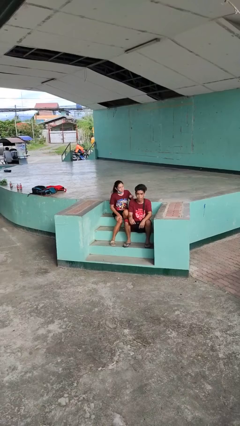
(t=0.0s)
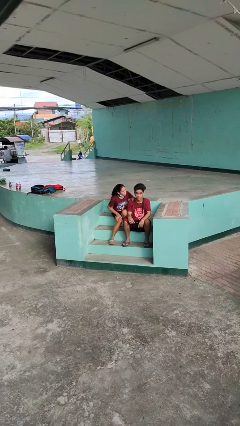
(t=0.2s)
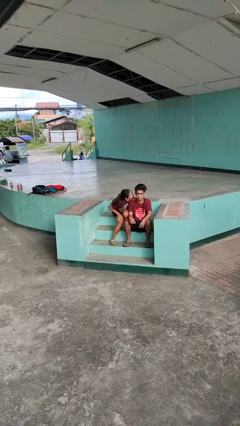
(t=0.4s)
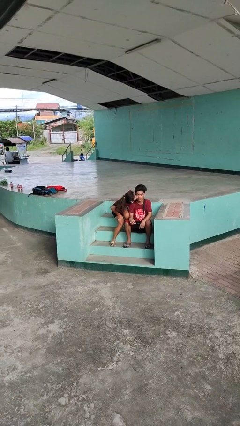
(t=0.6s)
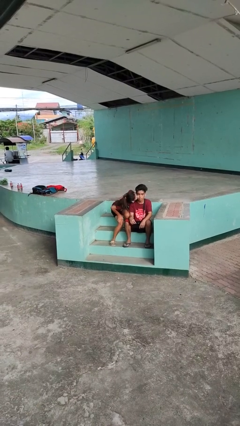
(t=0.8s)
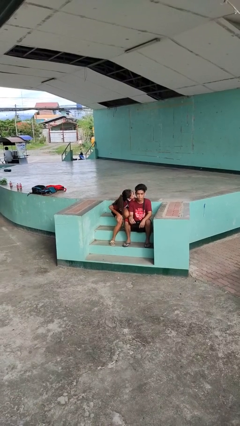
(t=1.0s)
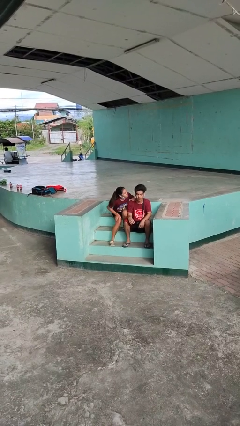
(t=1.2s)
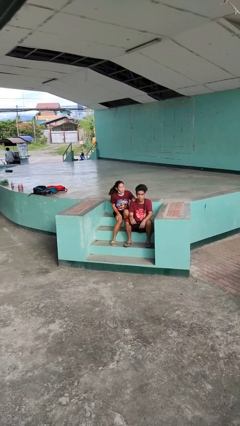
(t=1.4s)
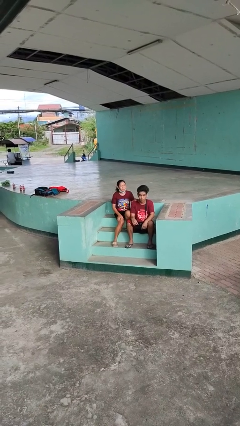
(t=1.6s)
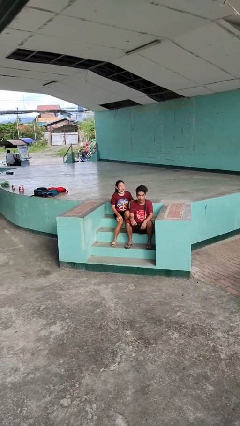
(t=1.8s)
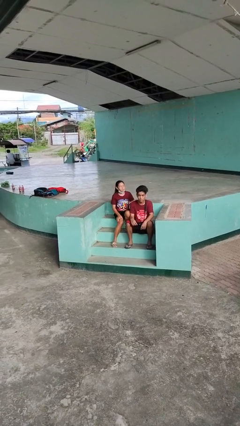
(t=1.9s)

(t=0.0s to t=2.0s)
person kisses cheek of person

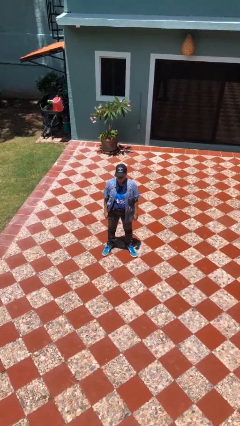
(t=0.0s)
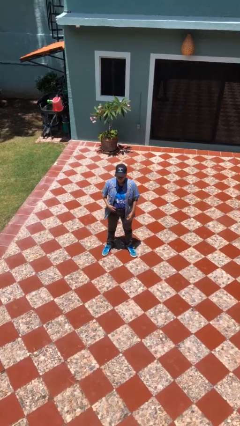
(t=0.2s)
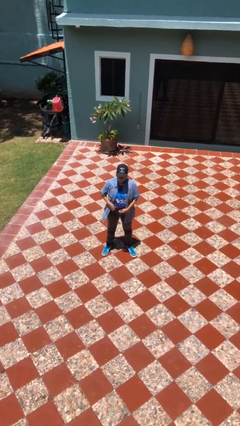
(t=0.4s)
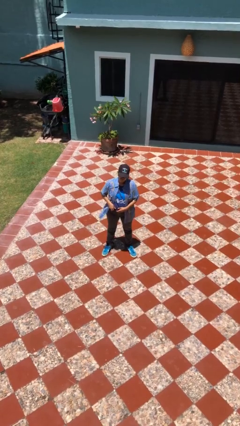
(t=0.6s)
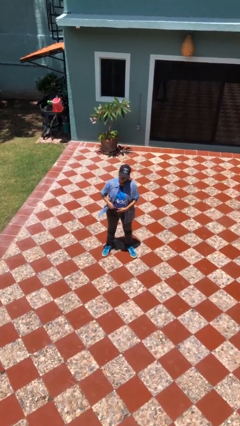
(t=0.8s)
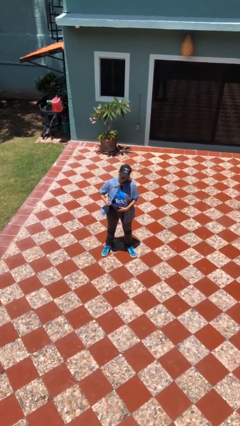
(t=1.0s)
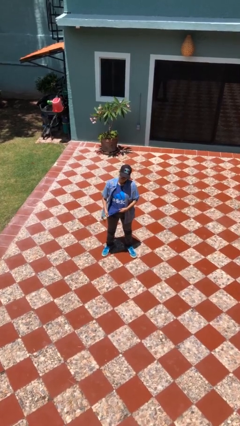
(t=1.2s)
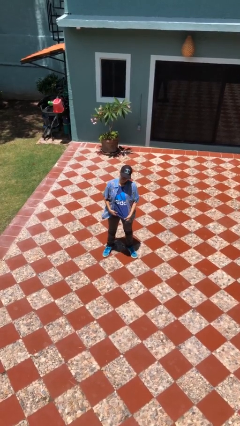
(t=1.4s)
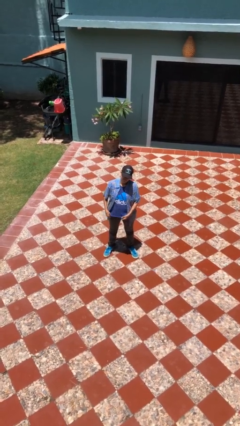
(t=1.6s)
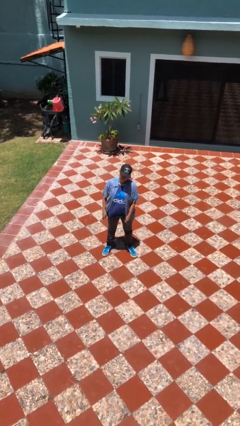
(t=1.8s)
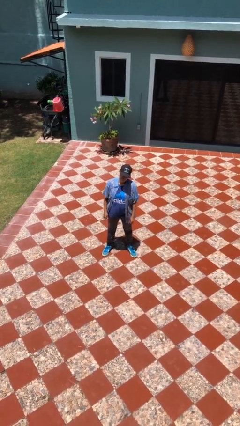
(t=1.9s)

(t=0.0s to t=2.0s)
person untucks shirt

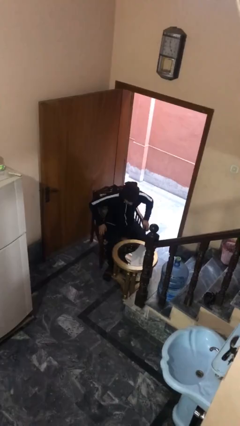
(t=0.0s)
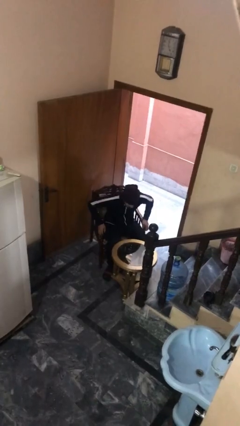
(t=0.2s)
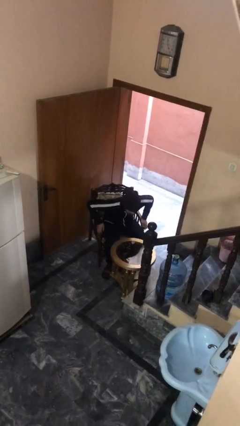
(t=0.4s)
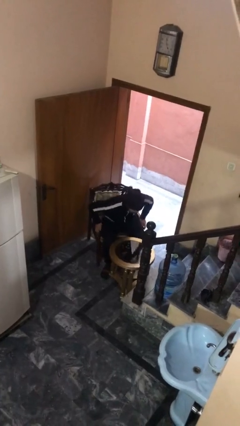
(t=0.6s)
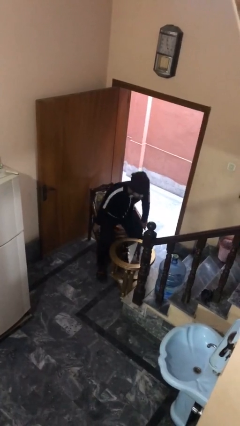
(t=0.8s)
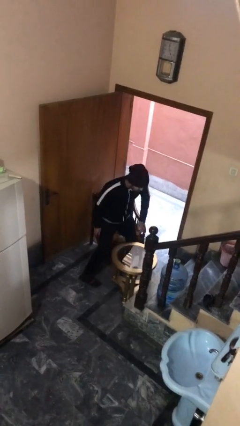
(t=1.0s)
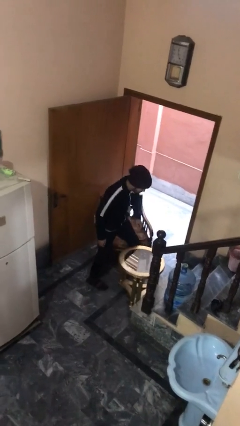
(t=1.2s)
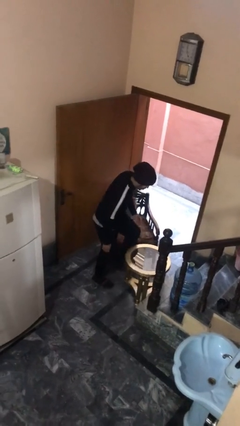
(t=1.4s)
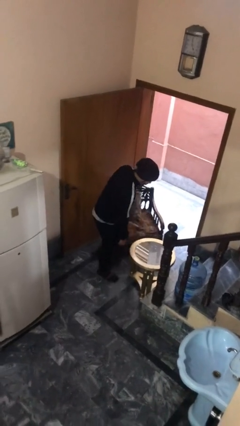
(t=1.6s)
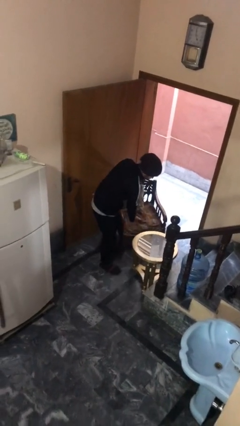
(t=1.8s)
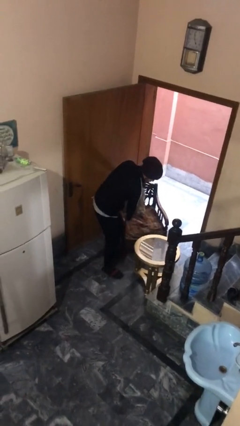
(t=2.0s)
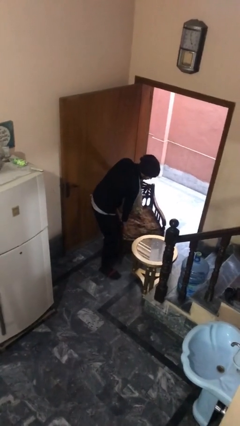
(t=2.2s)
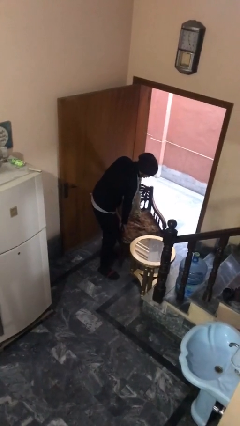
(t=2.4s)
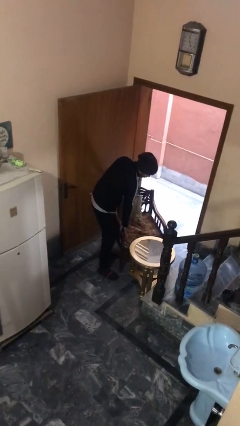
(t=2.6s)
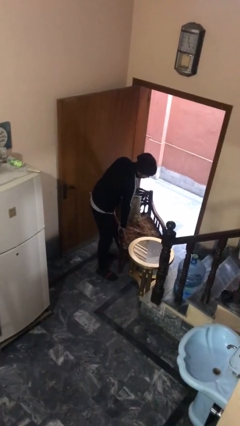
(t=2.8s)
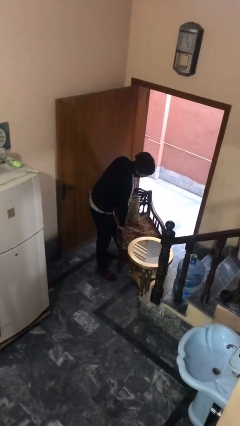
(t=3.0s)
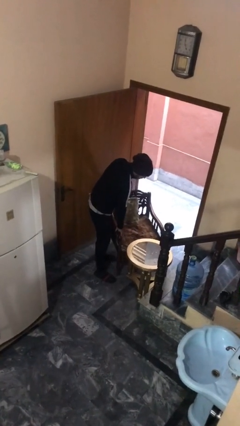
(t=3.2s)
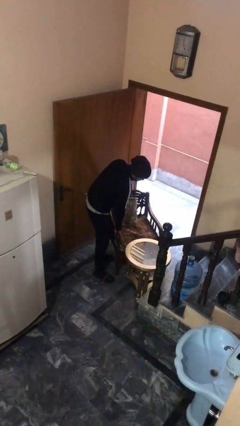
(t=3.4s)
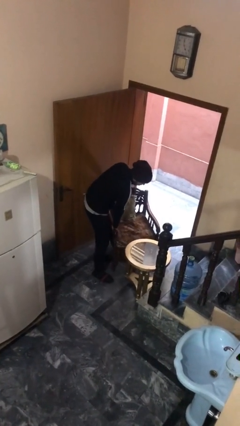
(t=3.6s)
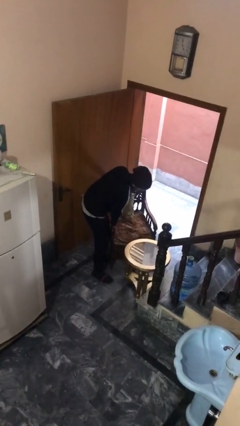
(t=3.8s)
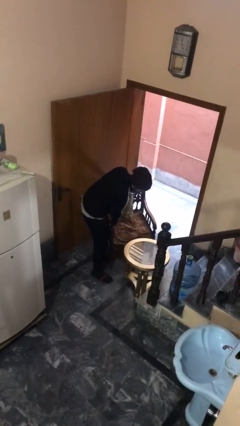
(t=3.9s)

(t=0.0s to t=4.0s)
person stands up

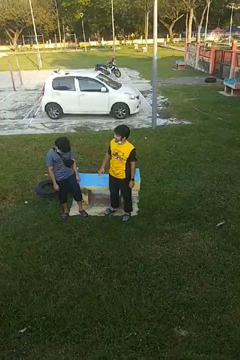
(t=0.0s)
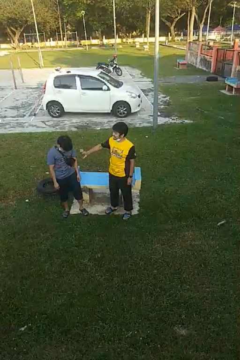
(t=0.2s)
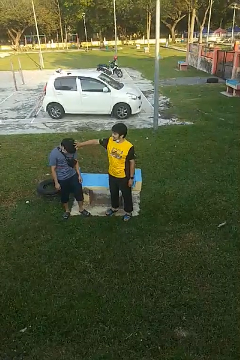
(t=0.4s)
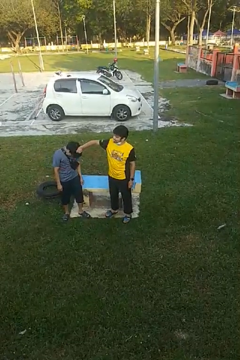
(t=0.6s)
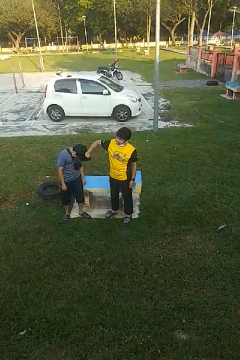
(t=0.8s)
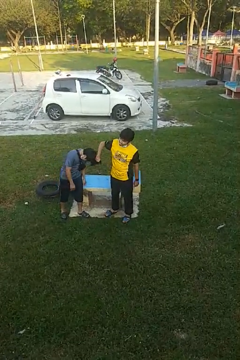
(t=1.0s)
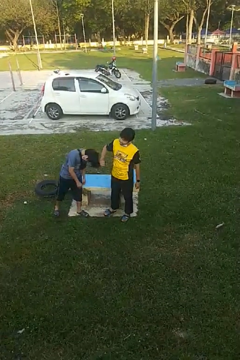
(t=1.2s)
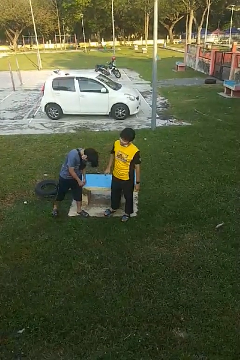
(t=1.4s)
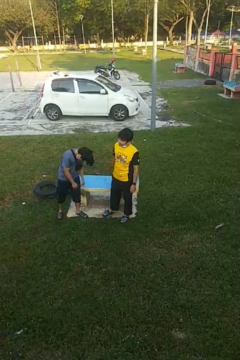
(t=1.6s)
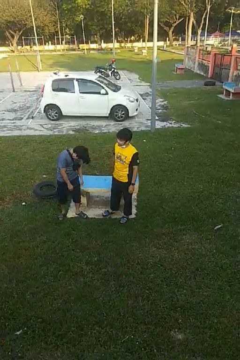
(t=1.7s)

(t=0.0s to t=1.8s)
person grabs person by hair

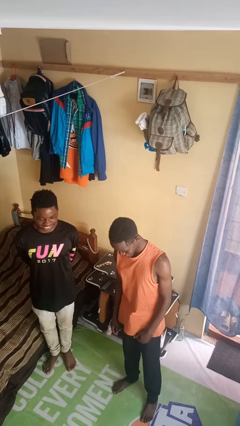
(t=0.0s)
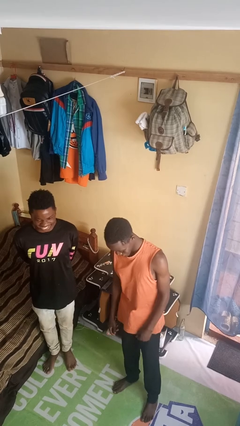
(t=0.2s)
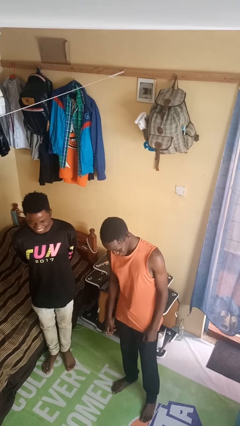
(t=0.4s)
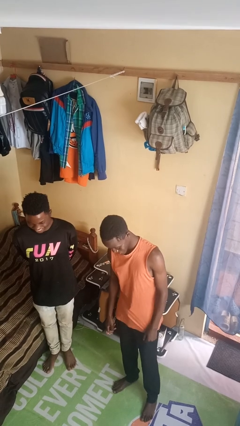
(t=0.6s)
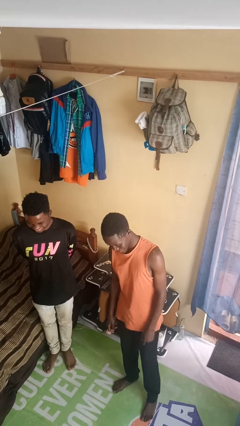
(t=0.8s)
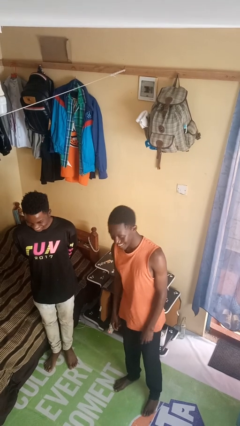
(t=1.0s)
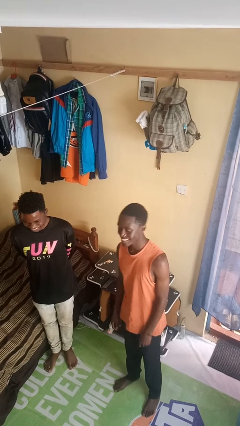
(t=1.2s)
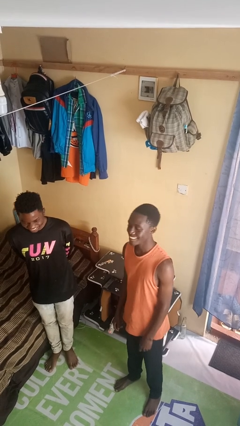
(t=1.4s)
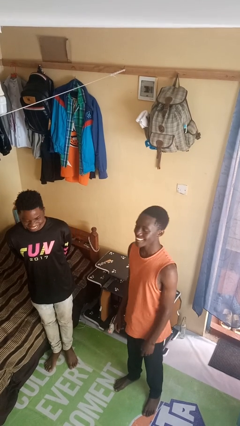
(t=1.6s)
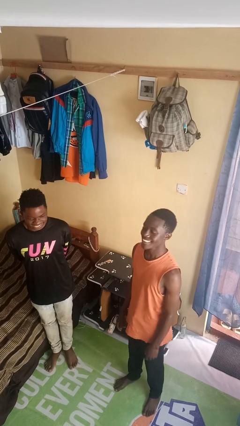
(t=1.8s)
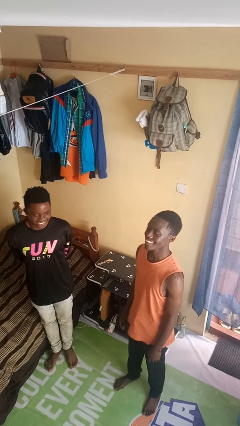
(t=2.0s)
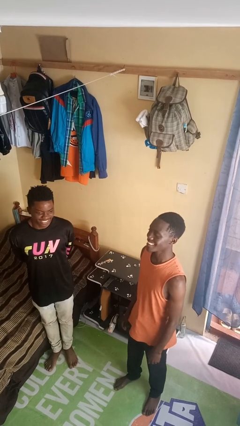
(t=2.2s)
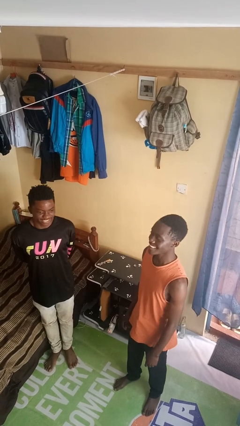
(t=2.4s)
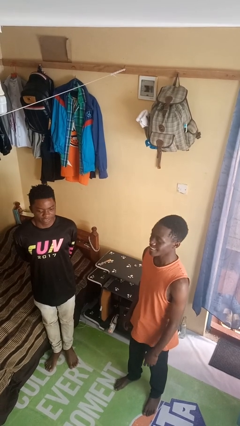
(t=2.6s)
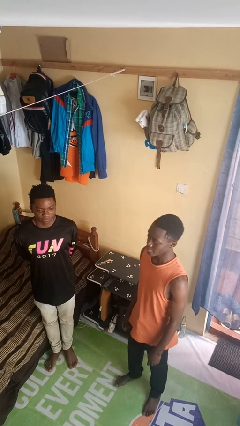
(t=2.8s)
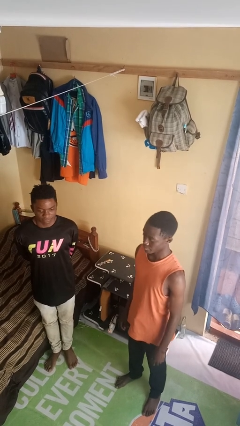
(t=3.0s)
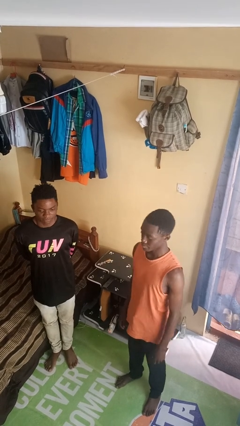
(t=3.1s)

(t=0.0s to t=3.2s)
person laughs with person

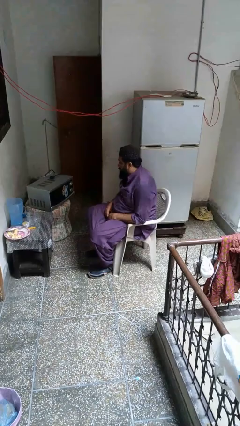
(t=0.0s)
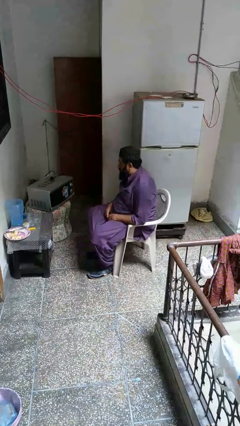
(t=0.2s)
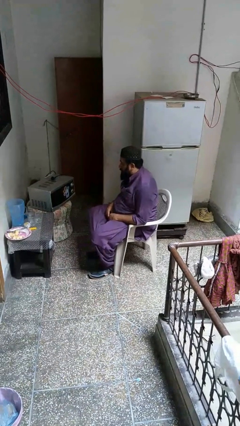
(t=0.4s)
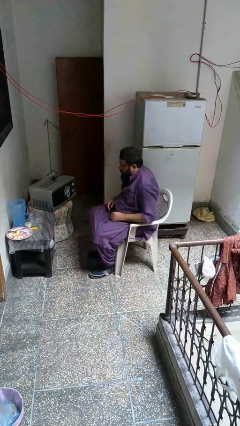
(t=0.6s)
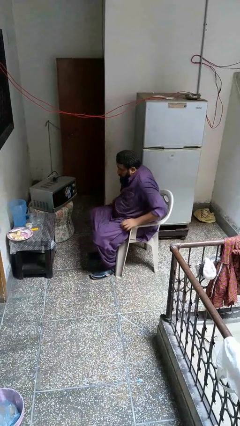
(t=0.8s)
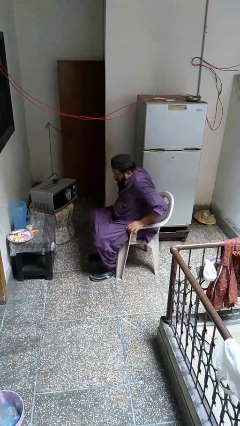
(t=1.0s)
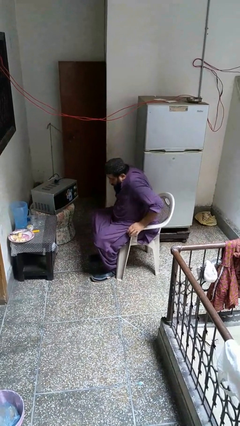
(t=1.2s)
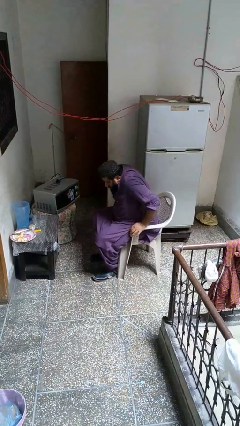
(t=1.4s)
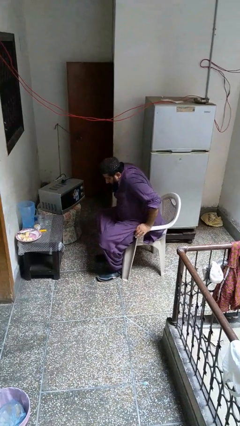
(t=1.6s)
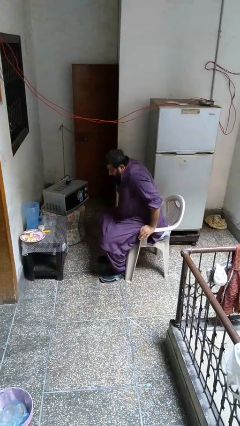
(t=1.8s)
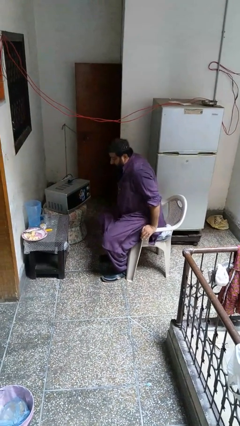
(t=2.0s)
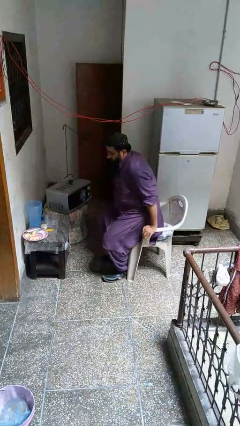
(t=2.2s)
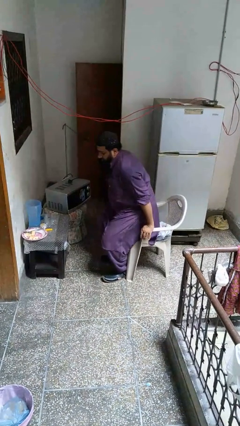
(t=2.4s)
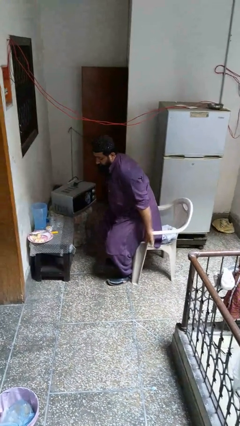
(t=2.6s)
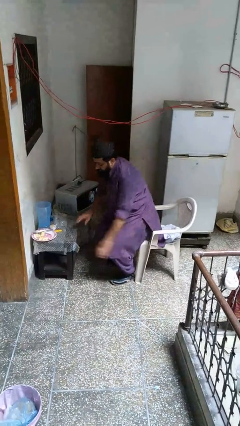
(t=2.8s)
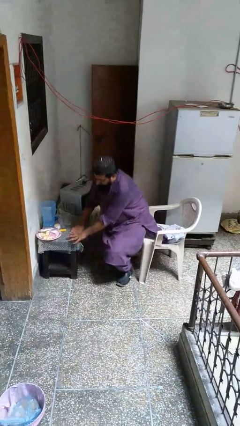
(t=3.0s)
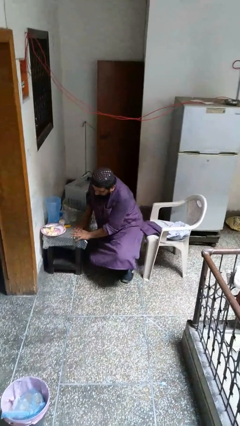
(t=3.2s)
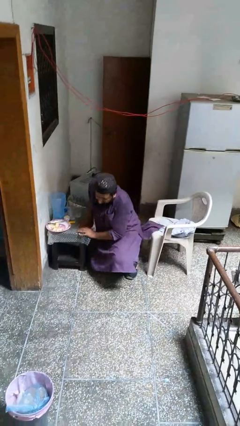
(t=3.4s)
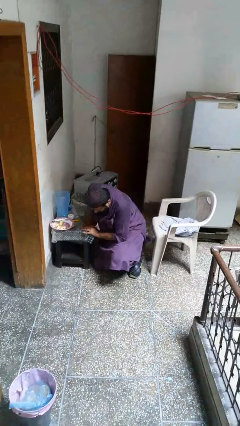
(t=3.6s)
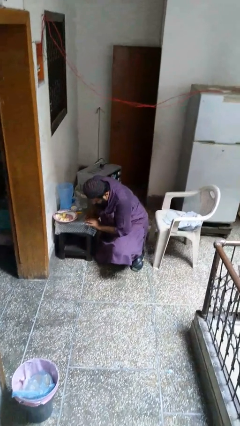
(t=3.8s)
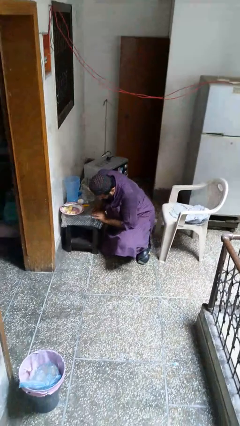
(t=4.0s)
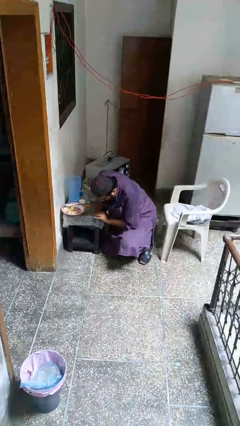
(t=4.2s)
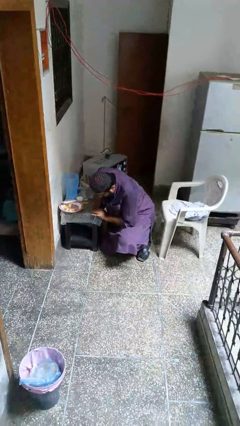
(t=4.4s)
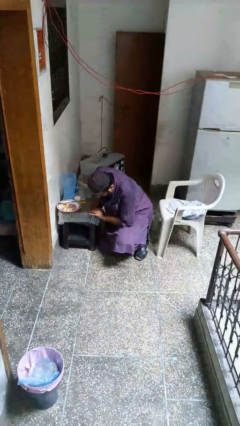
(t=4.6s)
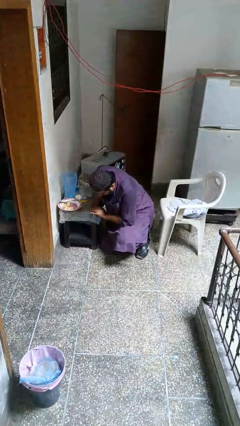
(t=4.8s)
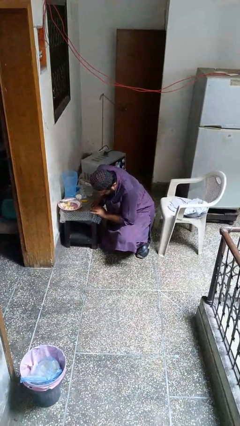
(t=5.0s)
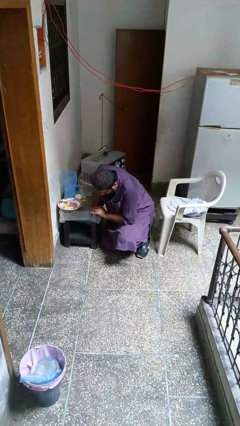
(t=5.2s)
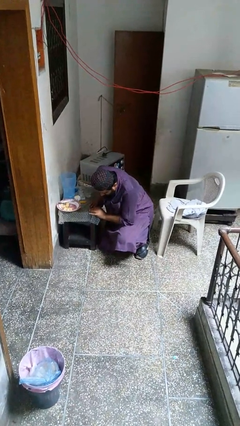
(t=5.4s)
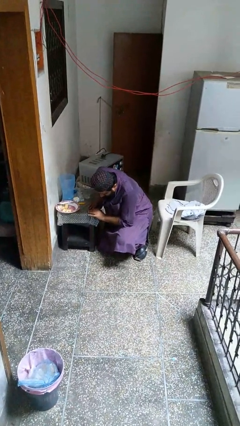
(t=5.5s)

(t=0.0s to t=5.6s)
person falls from chair
